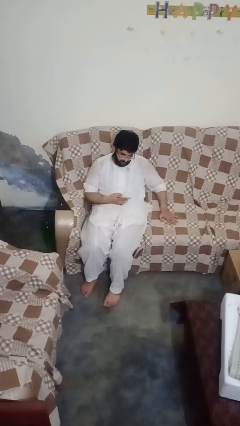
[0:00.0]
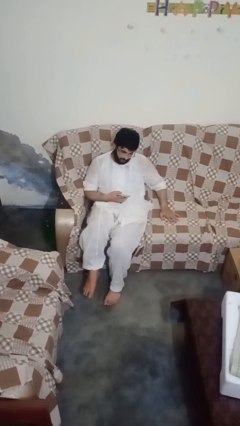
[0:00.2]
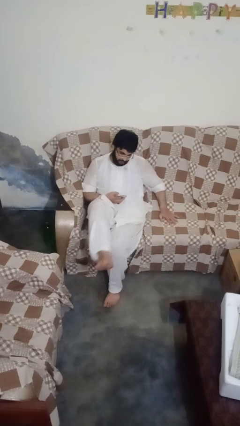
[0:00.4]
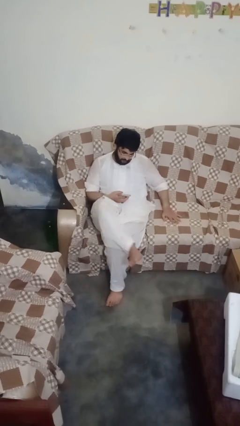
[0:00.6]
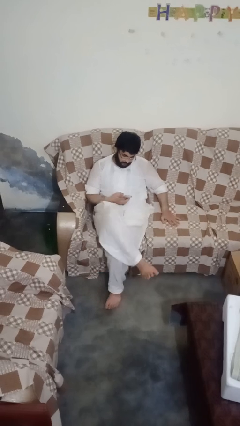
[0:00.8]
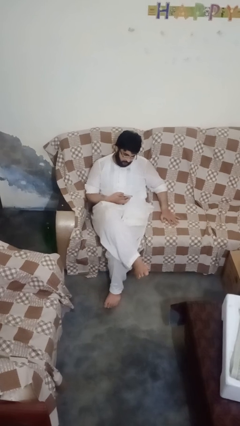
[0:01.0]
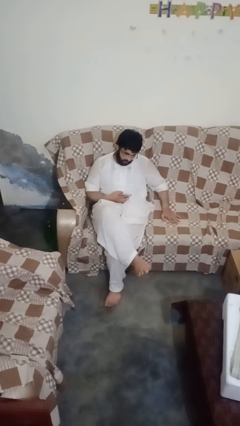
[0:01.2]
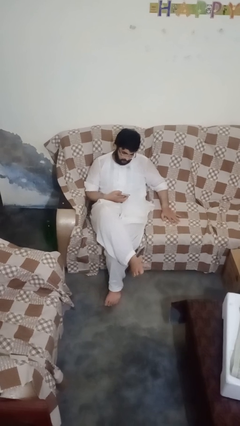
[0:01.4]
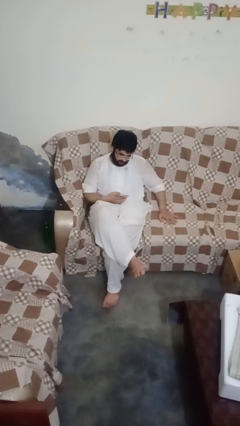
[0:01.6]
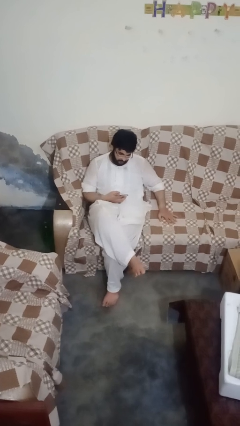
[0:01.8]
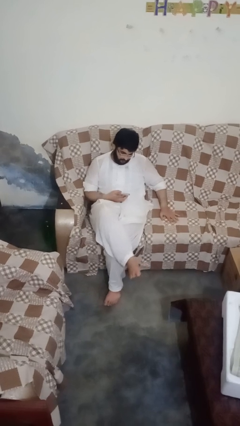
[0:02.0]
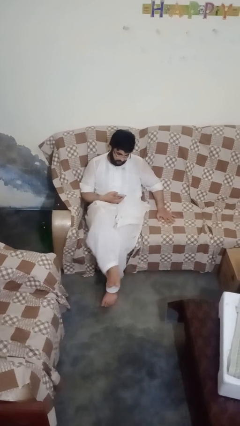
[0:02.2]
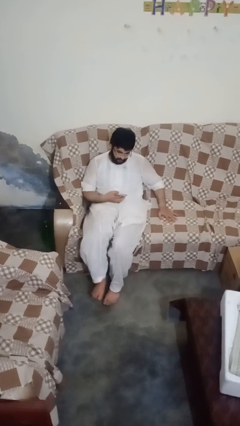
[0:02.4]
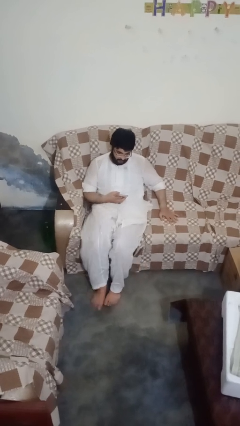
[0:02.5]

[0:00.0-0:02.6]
person crosses legs

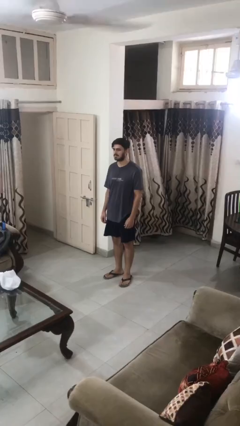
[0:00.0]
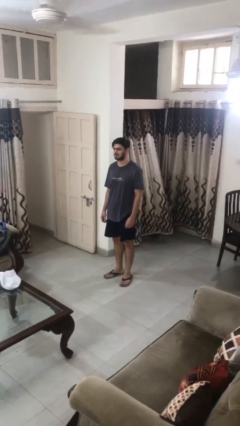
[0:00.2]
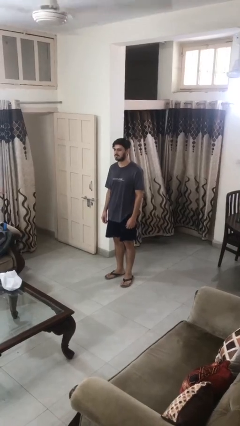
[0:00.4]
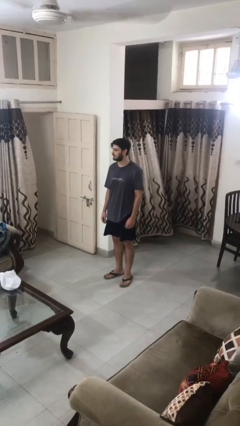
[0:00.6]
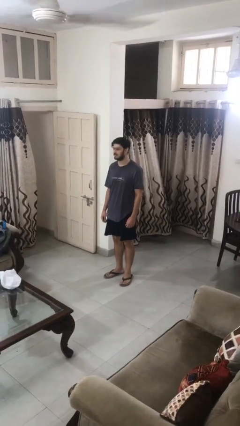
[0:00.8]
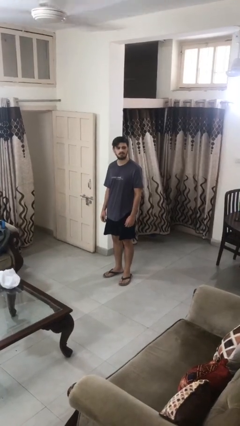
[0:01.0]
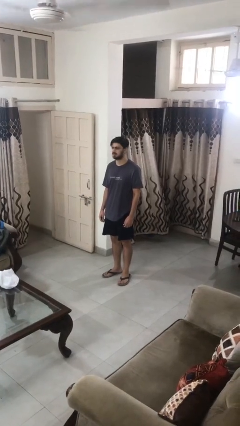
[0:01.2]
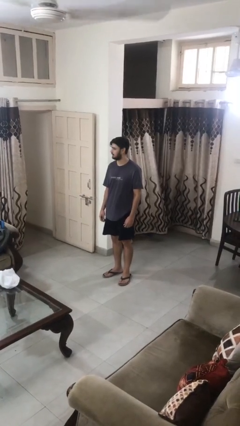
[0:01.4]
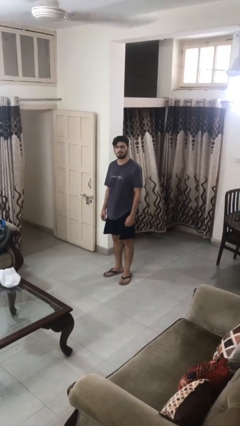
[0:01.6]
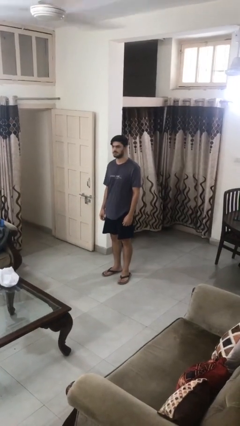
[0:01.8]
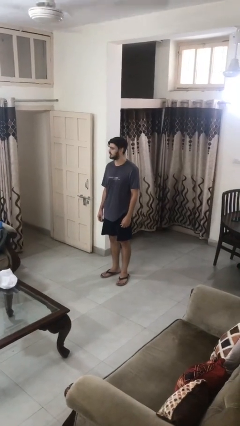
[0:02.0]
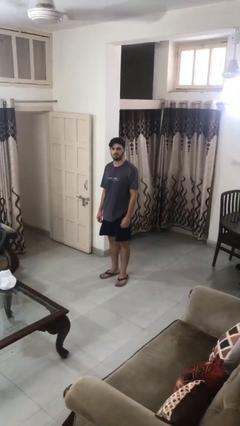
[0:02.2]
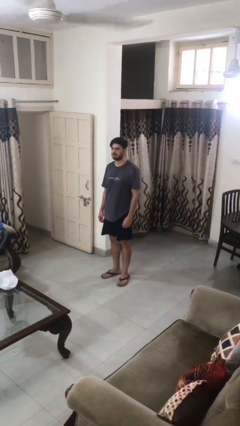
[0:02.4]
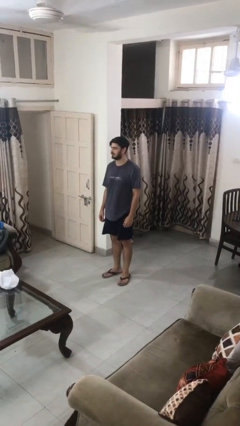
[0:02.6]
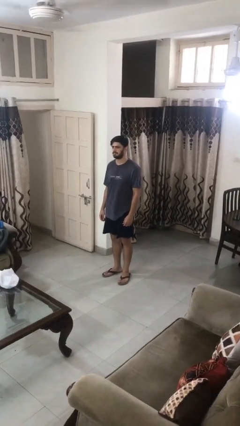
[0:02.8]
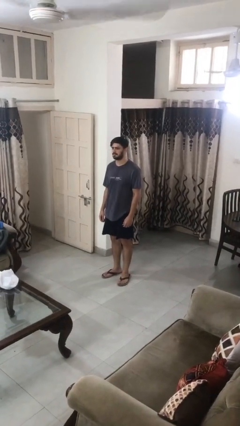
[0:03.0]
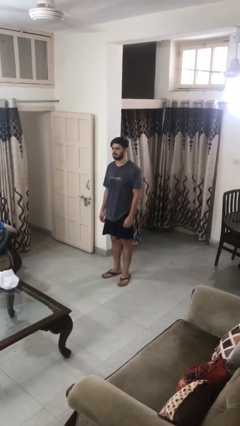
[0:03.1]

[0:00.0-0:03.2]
person shakes head

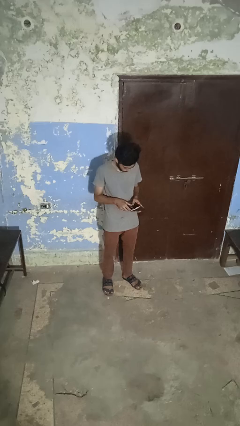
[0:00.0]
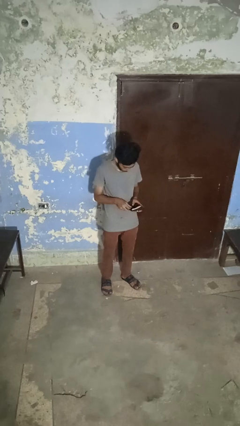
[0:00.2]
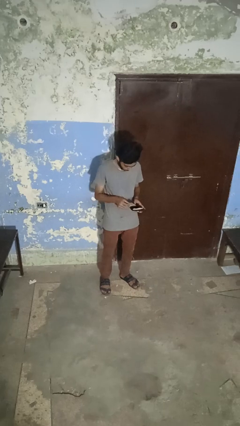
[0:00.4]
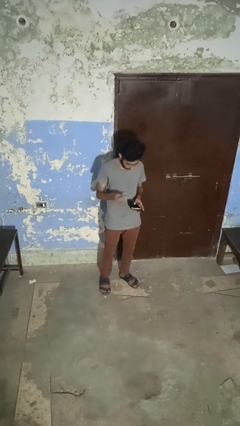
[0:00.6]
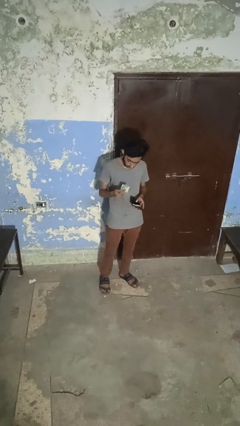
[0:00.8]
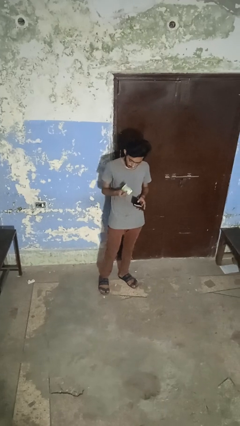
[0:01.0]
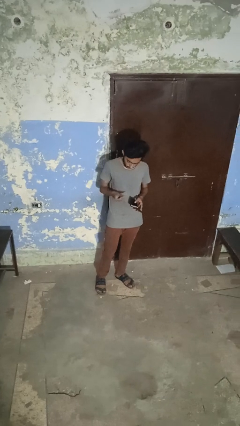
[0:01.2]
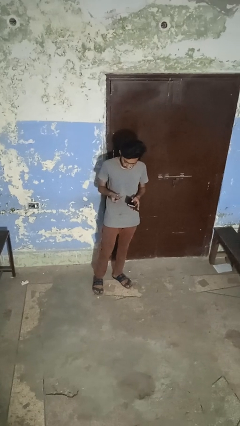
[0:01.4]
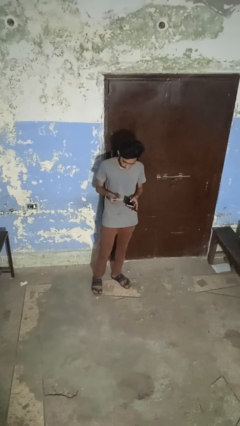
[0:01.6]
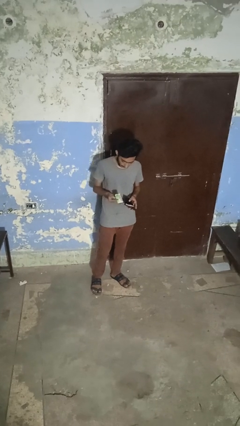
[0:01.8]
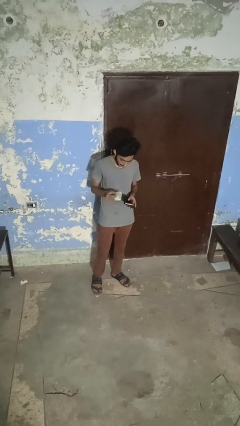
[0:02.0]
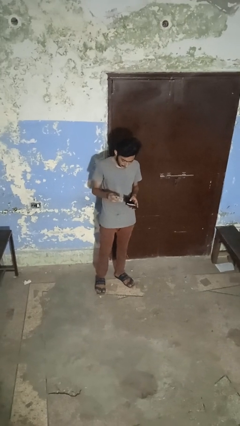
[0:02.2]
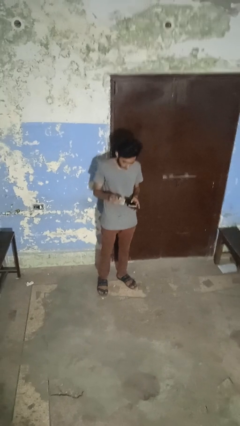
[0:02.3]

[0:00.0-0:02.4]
person takes object from purse

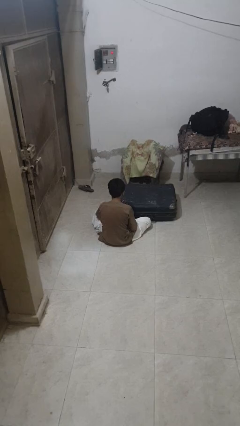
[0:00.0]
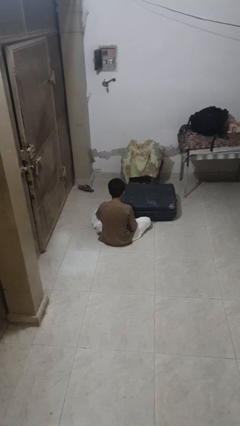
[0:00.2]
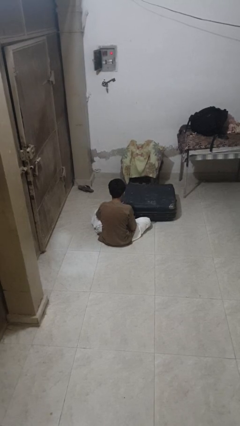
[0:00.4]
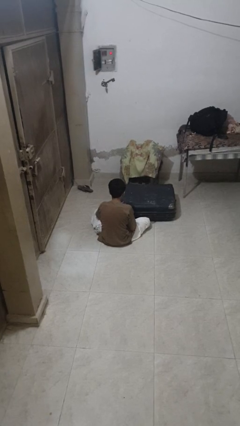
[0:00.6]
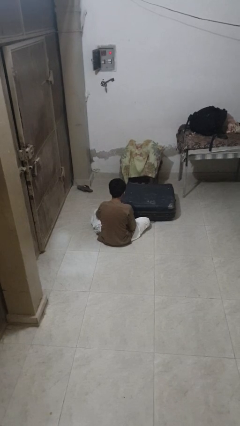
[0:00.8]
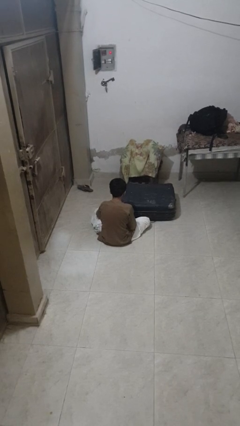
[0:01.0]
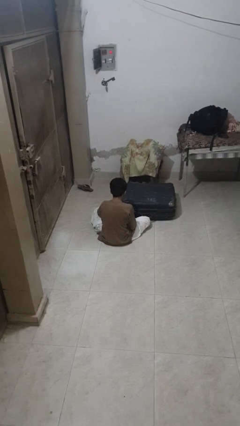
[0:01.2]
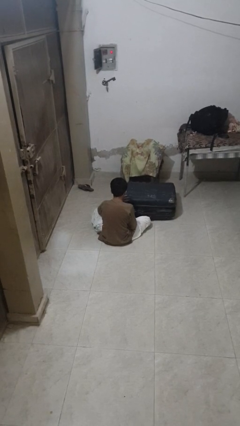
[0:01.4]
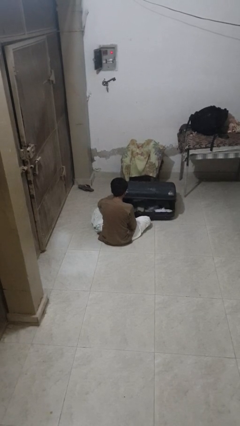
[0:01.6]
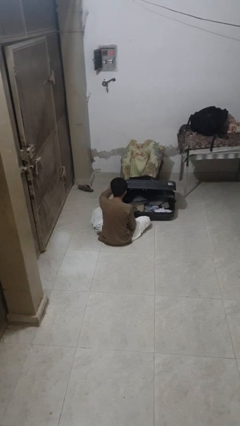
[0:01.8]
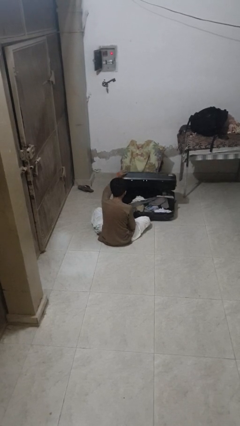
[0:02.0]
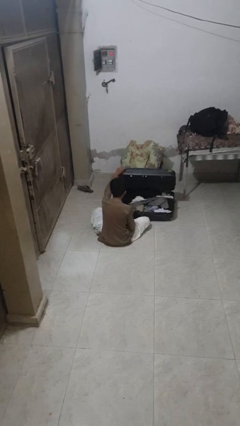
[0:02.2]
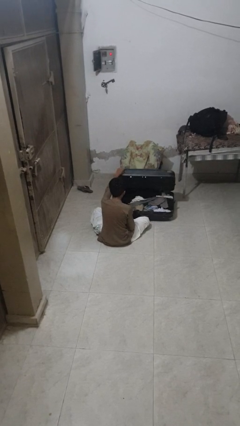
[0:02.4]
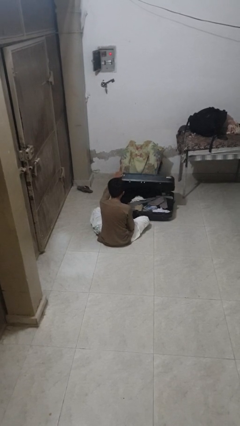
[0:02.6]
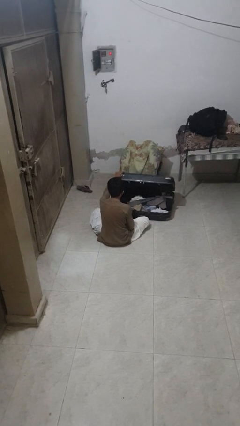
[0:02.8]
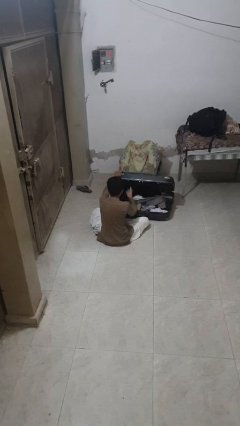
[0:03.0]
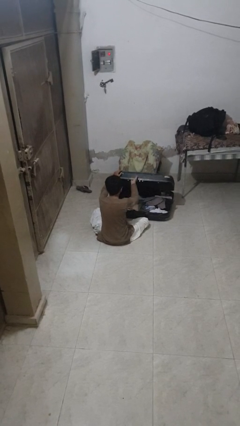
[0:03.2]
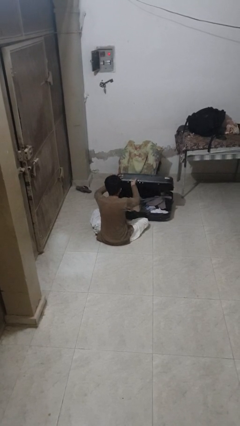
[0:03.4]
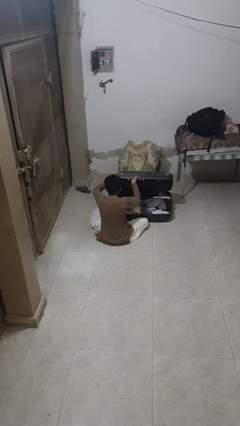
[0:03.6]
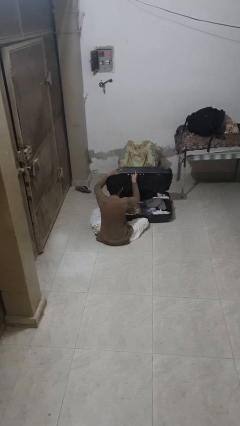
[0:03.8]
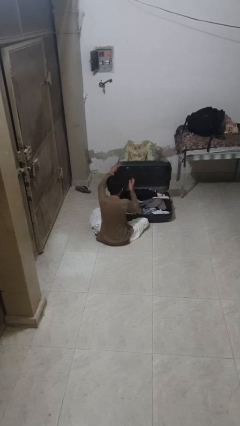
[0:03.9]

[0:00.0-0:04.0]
person opens suitcase

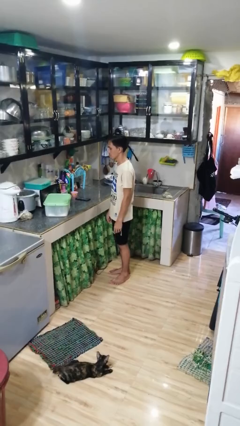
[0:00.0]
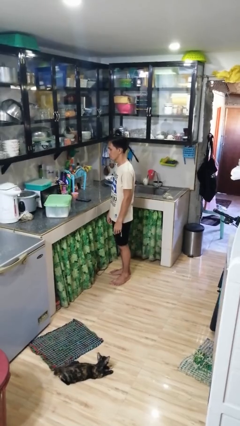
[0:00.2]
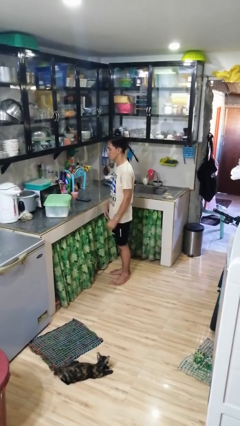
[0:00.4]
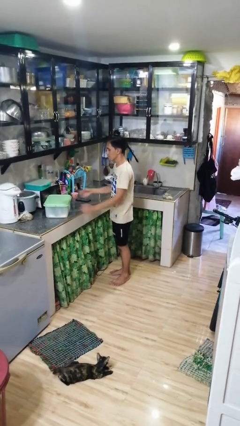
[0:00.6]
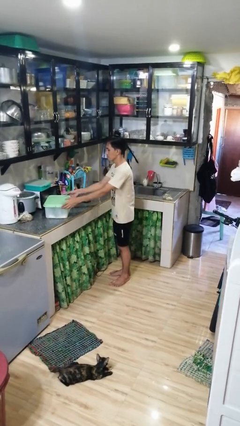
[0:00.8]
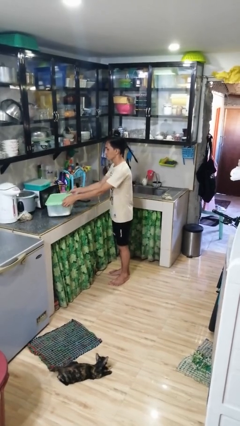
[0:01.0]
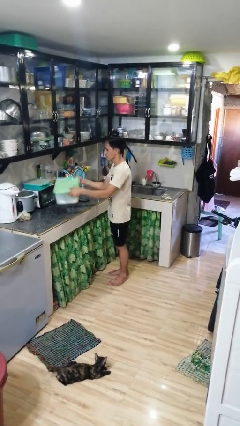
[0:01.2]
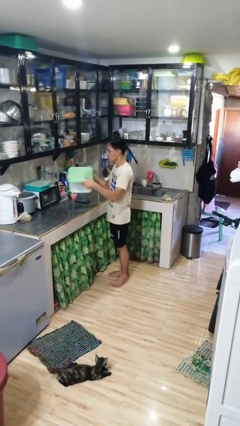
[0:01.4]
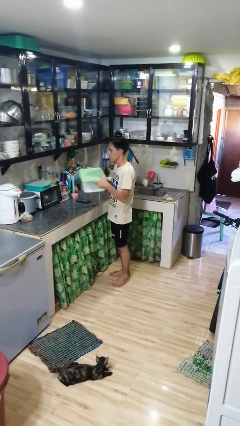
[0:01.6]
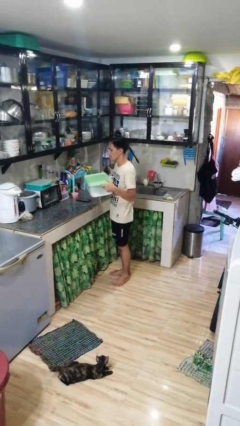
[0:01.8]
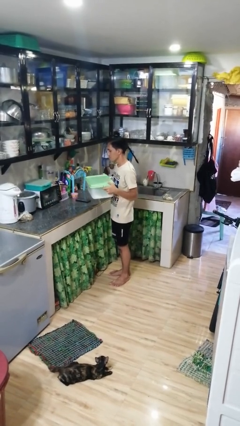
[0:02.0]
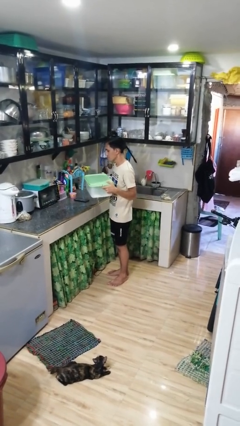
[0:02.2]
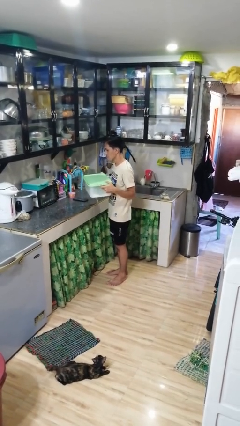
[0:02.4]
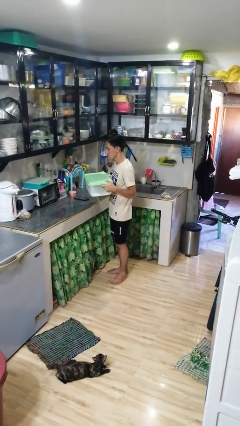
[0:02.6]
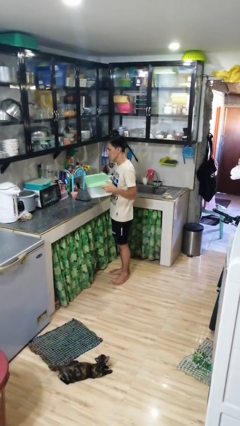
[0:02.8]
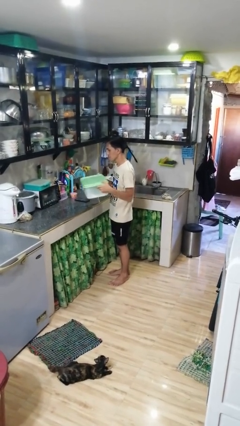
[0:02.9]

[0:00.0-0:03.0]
person picks up object from countertop

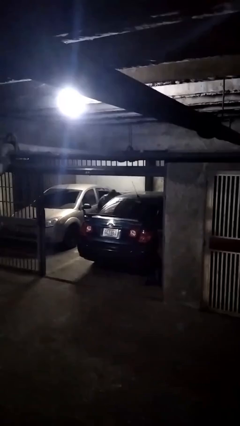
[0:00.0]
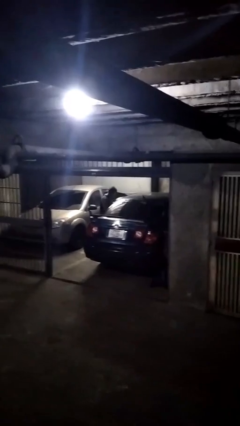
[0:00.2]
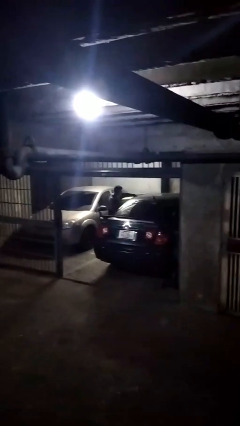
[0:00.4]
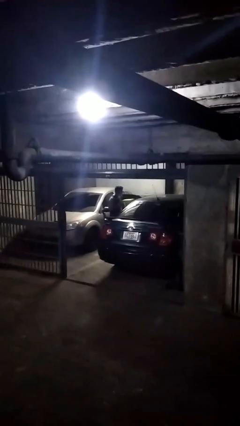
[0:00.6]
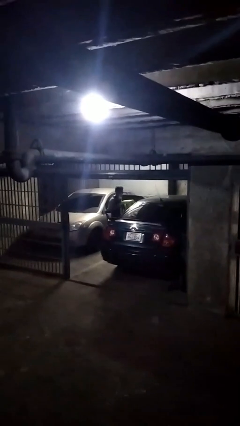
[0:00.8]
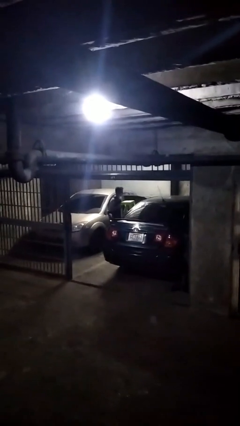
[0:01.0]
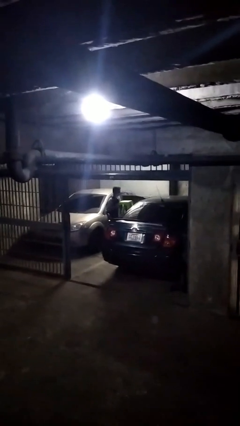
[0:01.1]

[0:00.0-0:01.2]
person unloads car

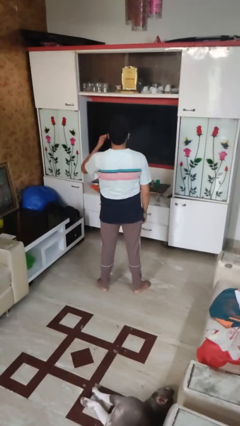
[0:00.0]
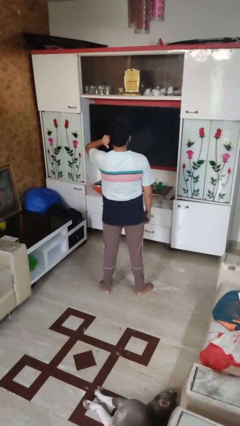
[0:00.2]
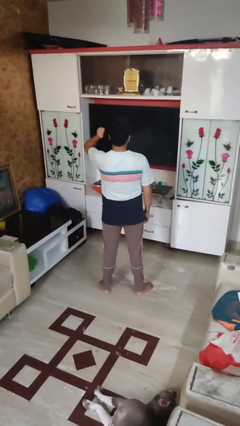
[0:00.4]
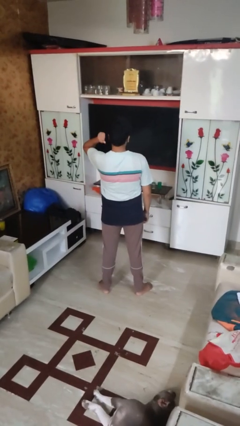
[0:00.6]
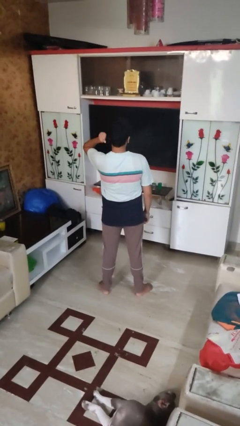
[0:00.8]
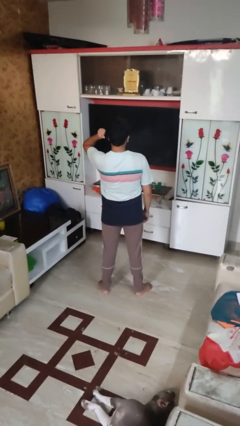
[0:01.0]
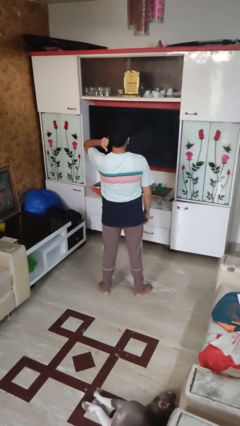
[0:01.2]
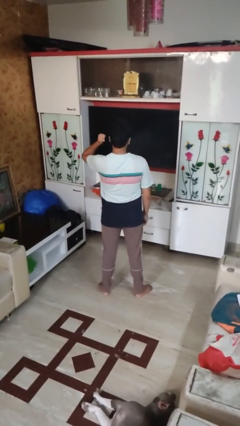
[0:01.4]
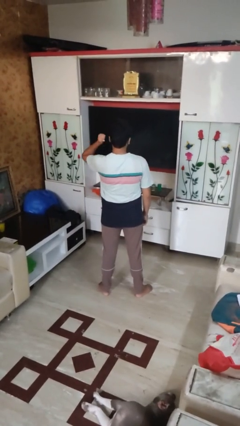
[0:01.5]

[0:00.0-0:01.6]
person gestures behind me
